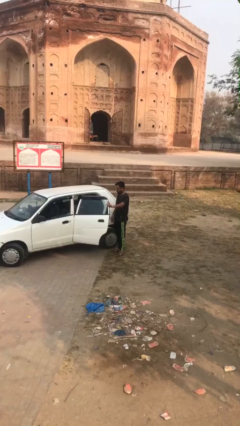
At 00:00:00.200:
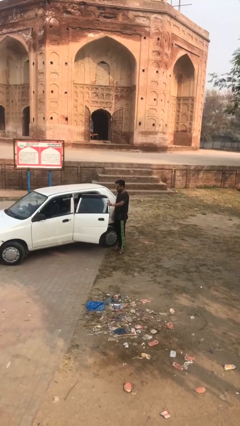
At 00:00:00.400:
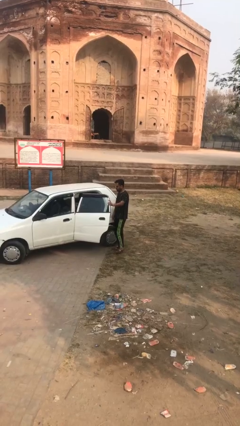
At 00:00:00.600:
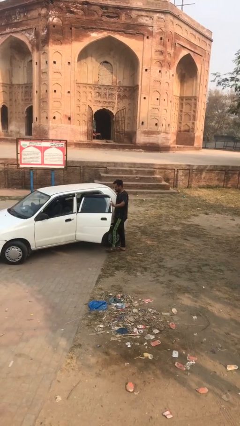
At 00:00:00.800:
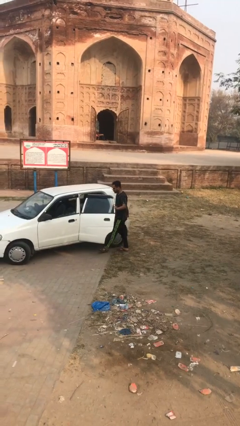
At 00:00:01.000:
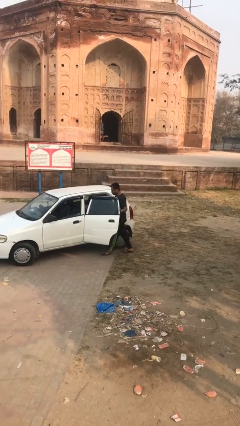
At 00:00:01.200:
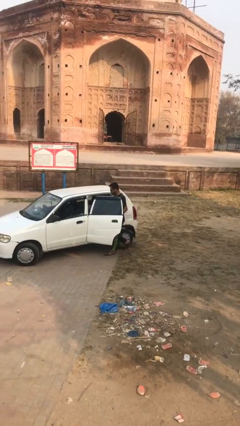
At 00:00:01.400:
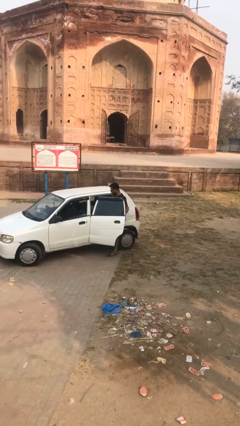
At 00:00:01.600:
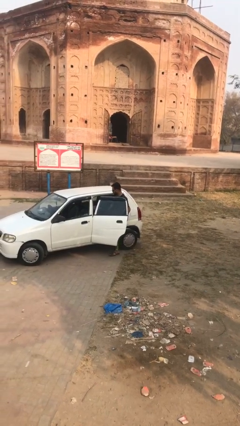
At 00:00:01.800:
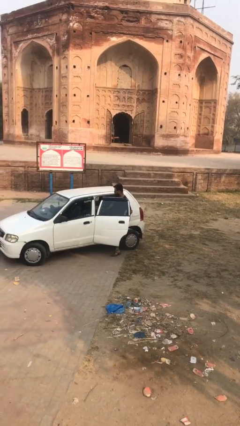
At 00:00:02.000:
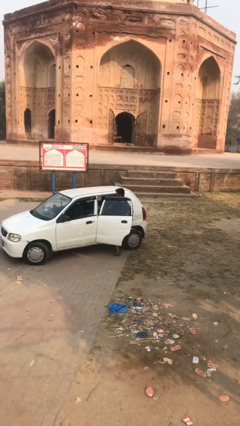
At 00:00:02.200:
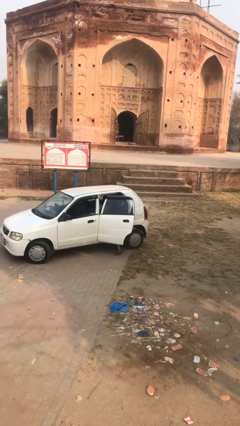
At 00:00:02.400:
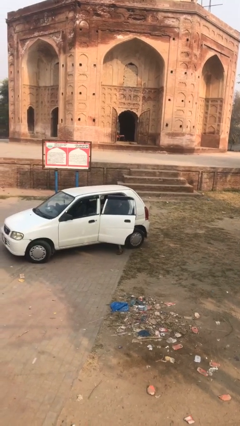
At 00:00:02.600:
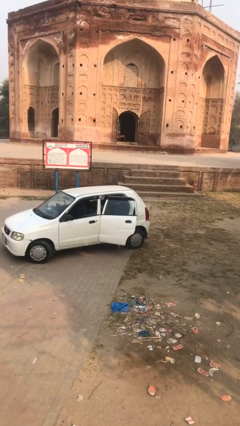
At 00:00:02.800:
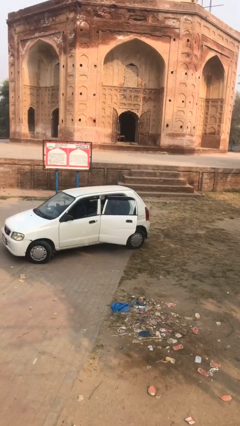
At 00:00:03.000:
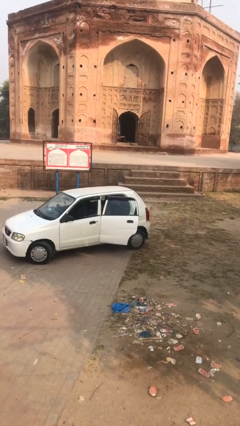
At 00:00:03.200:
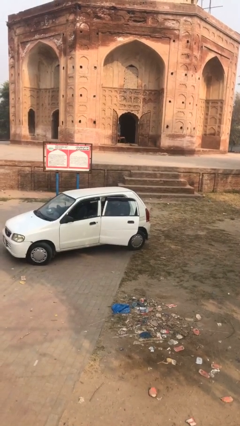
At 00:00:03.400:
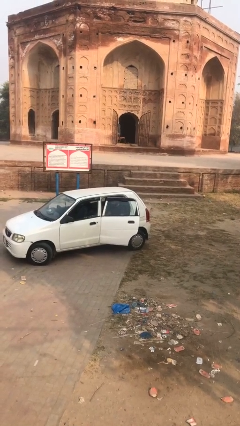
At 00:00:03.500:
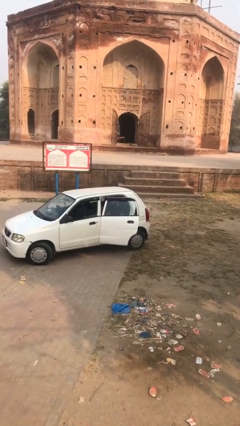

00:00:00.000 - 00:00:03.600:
person enters car

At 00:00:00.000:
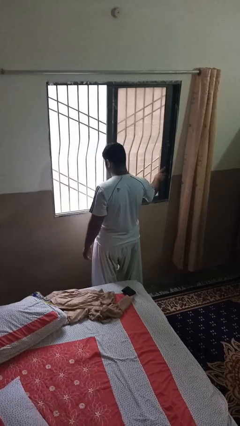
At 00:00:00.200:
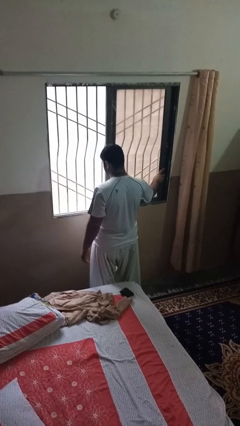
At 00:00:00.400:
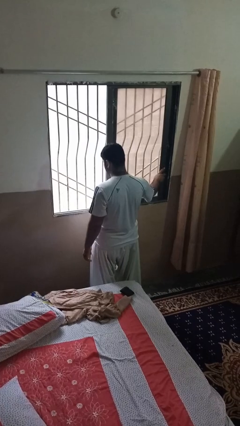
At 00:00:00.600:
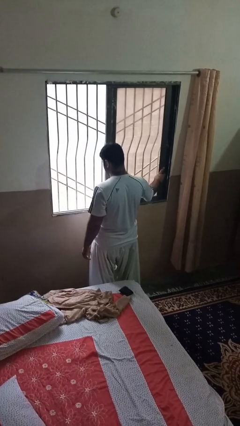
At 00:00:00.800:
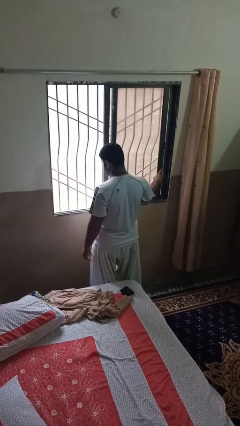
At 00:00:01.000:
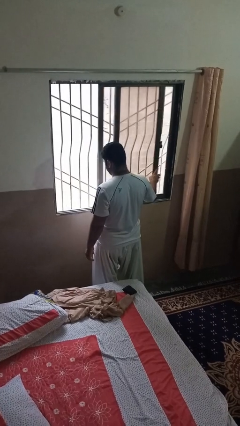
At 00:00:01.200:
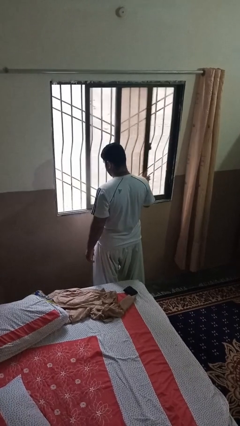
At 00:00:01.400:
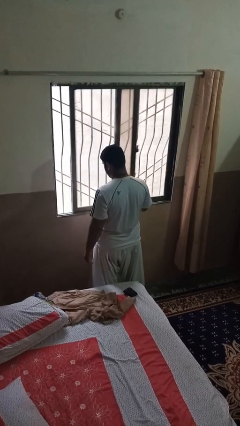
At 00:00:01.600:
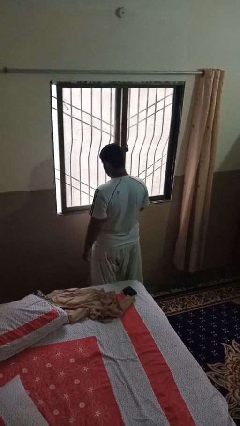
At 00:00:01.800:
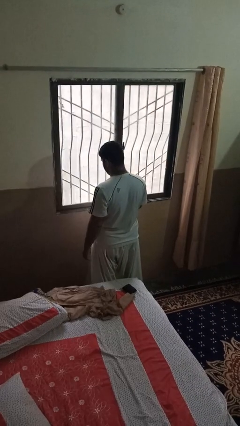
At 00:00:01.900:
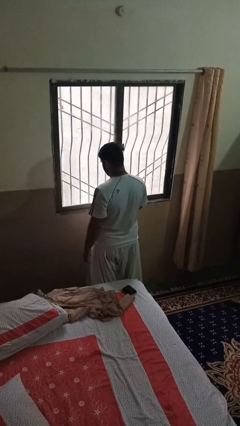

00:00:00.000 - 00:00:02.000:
person closes home window

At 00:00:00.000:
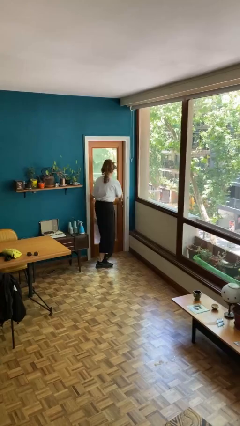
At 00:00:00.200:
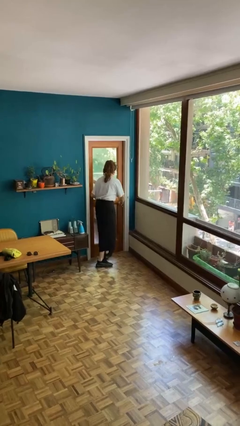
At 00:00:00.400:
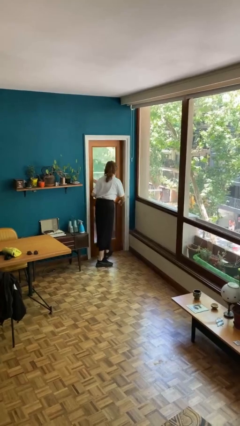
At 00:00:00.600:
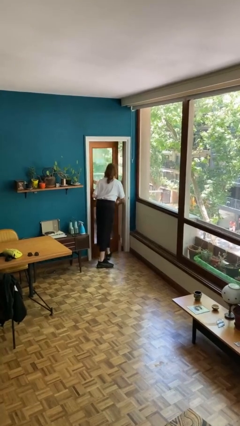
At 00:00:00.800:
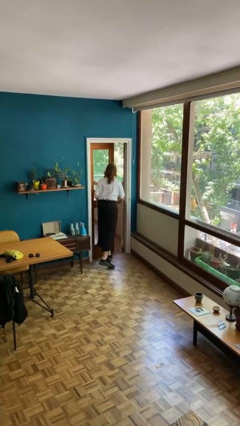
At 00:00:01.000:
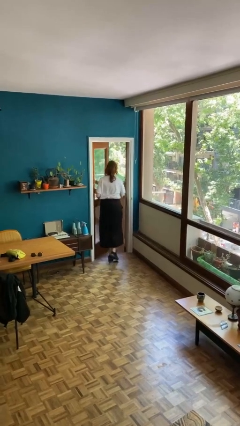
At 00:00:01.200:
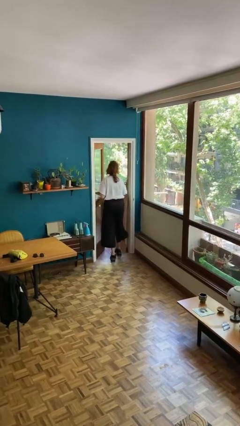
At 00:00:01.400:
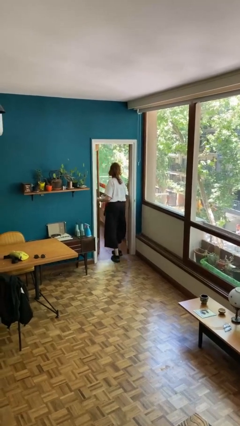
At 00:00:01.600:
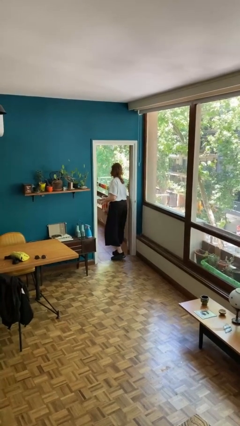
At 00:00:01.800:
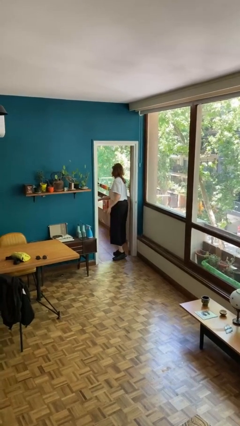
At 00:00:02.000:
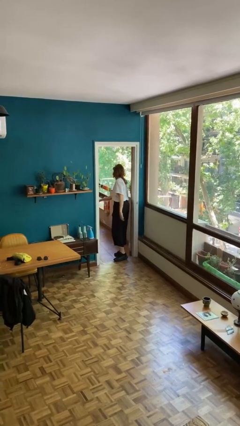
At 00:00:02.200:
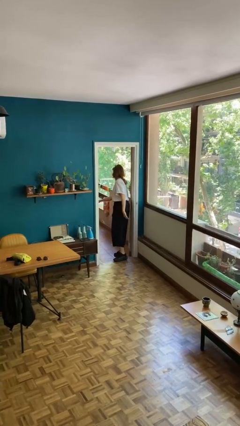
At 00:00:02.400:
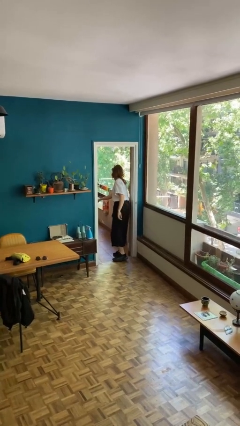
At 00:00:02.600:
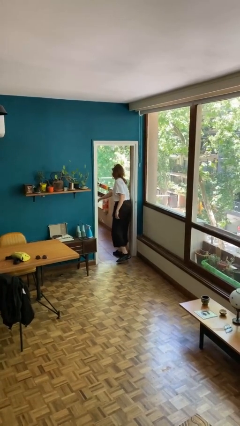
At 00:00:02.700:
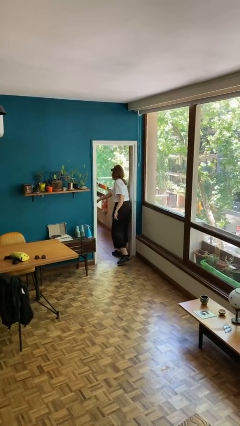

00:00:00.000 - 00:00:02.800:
person opens facility door

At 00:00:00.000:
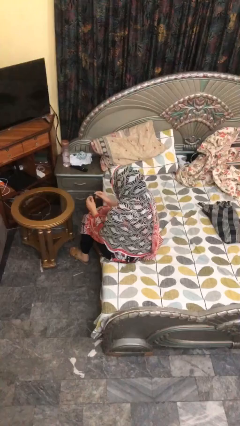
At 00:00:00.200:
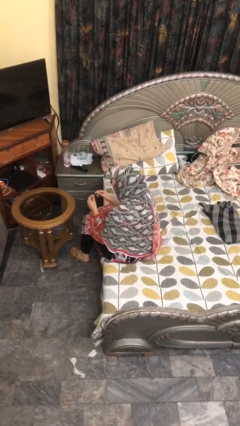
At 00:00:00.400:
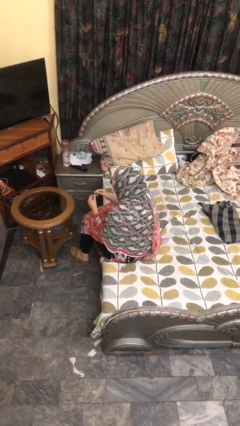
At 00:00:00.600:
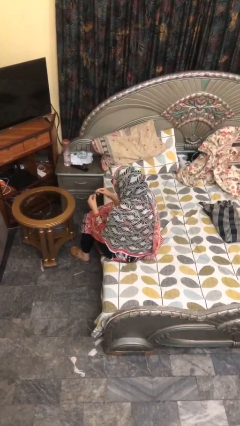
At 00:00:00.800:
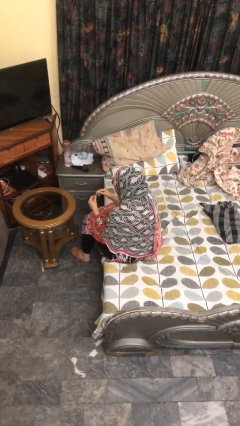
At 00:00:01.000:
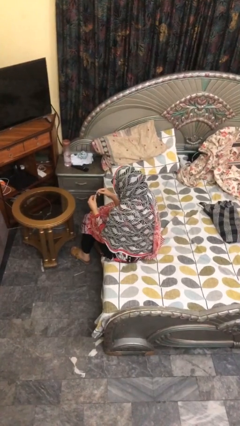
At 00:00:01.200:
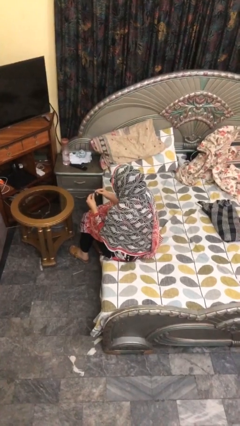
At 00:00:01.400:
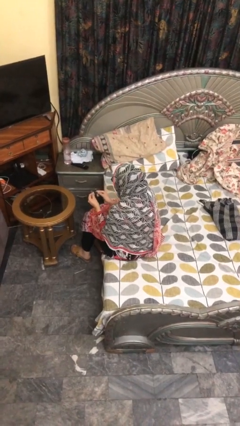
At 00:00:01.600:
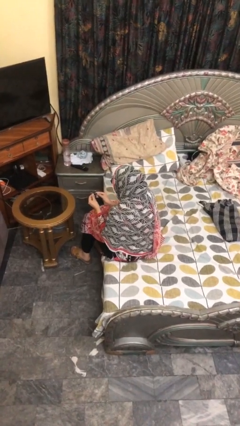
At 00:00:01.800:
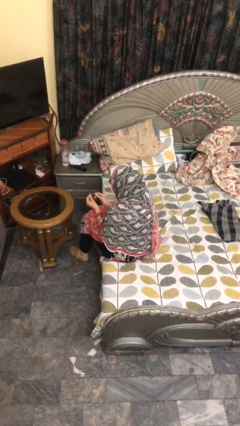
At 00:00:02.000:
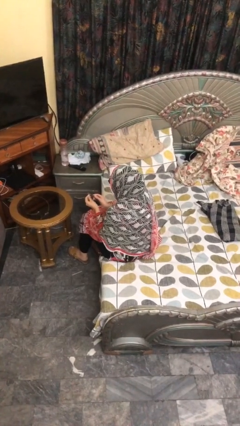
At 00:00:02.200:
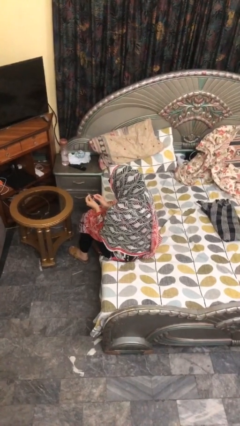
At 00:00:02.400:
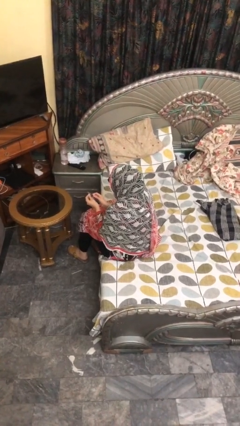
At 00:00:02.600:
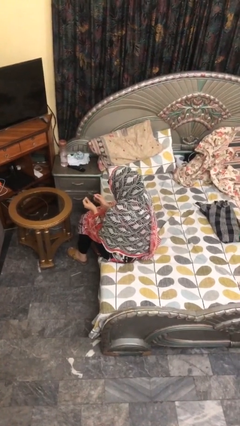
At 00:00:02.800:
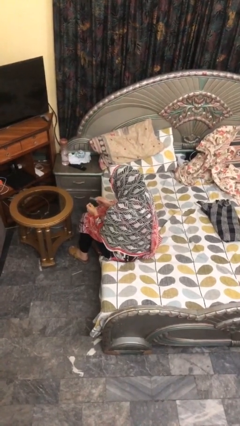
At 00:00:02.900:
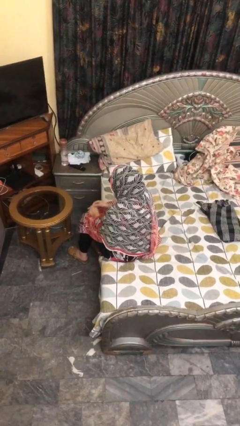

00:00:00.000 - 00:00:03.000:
person files fingernails

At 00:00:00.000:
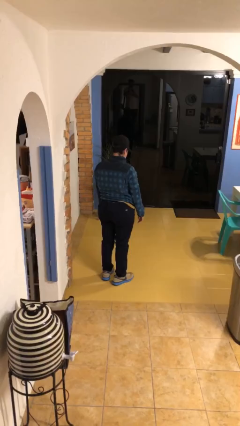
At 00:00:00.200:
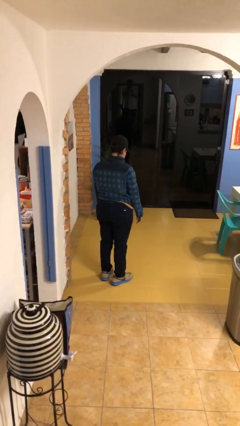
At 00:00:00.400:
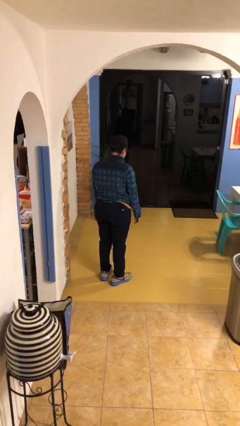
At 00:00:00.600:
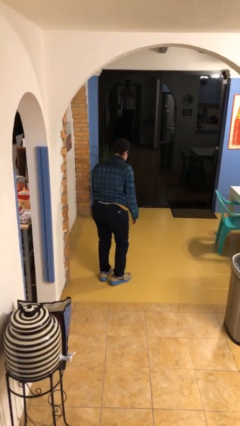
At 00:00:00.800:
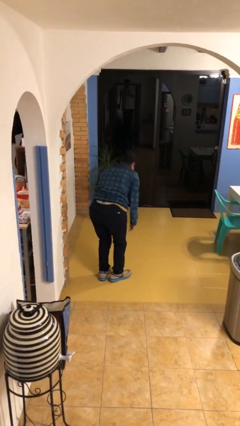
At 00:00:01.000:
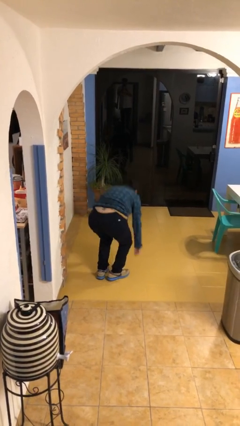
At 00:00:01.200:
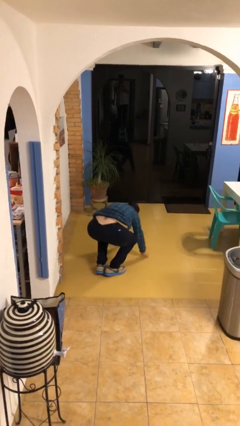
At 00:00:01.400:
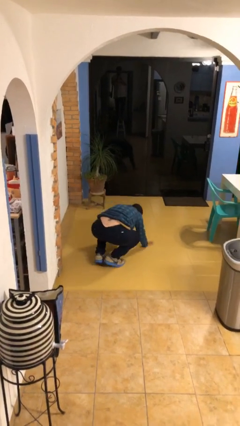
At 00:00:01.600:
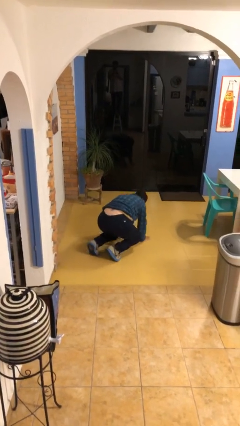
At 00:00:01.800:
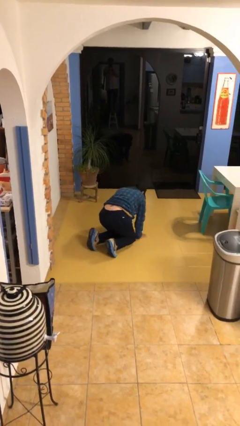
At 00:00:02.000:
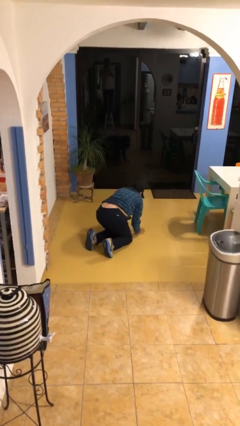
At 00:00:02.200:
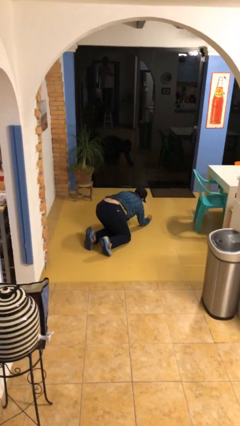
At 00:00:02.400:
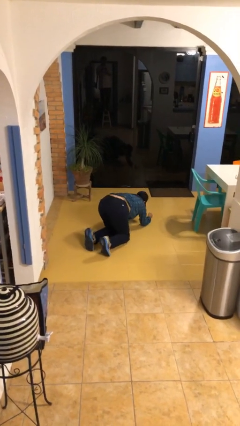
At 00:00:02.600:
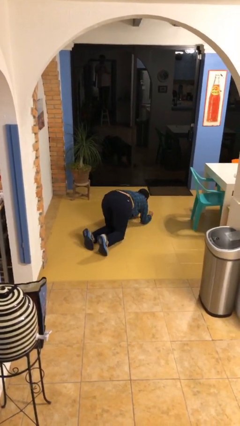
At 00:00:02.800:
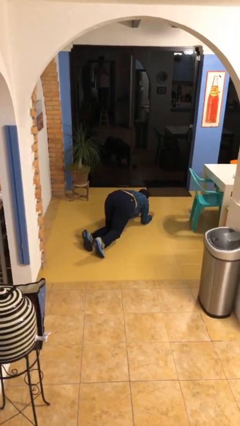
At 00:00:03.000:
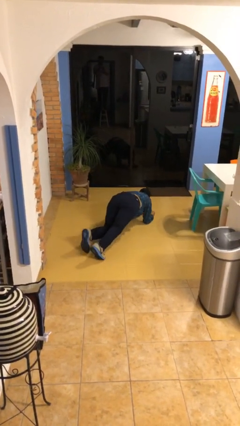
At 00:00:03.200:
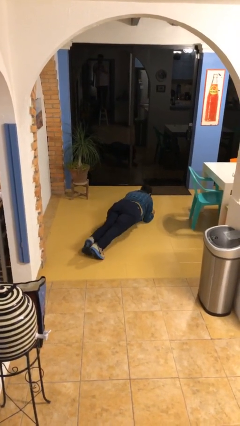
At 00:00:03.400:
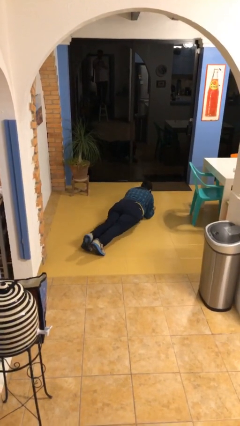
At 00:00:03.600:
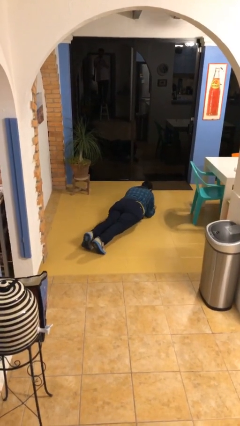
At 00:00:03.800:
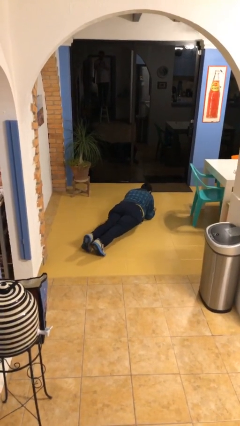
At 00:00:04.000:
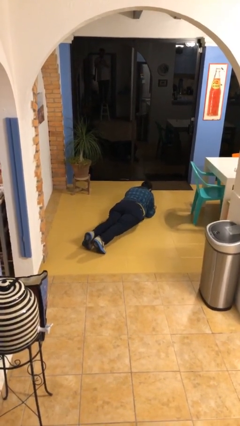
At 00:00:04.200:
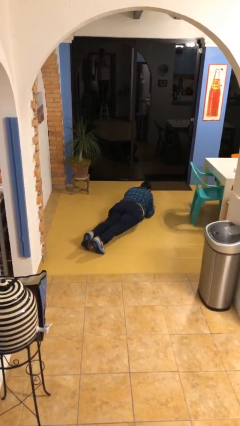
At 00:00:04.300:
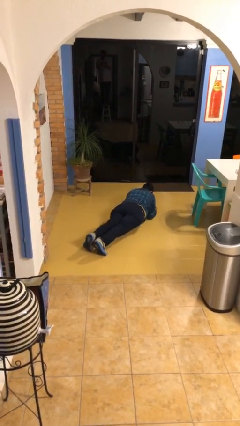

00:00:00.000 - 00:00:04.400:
person exercises with plank

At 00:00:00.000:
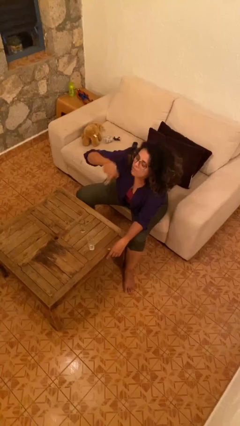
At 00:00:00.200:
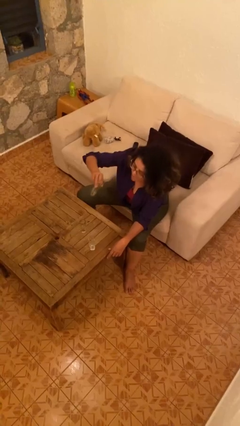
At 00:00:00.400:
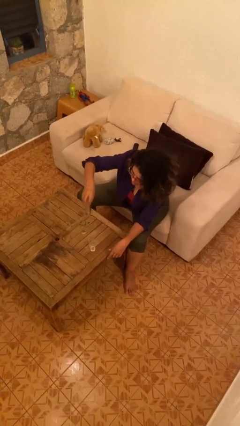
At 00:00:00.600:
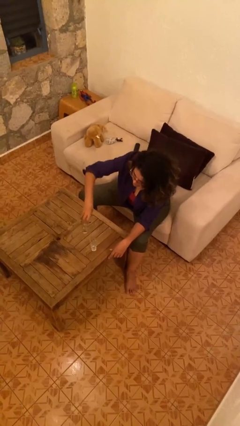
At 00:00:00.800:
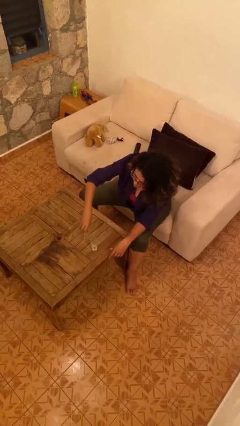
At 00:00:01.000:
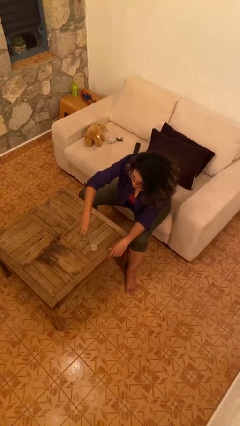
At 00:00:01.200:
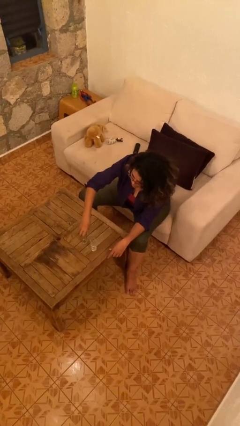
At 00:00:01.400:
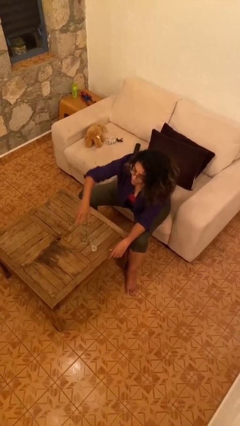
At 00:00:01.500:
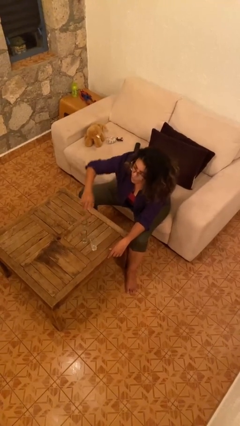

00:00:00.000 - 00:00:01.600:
person puts down object on table
